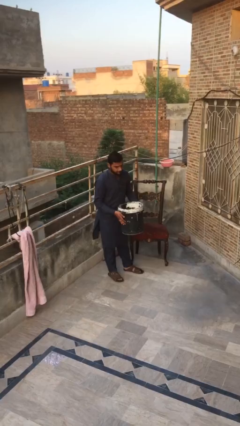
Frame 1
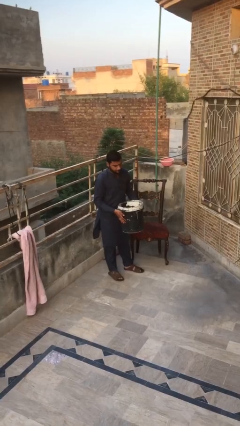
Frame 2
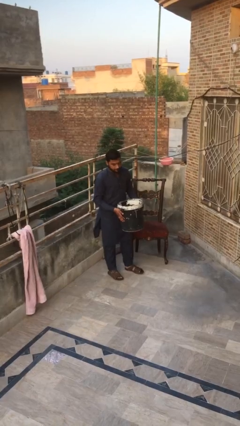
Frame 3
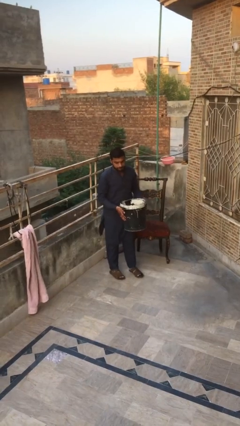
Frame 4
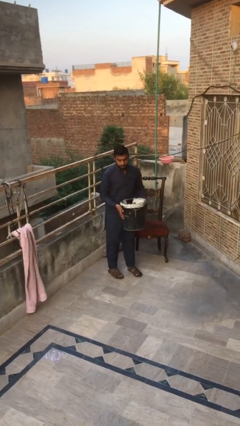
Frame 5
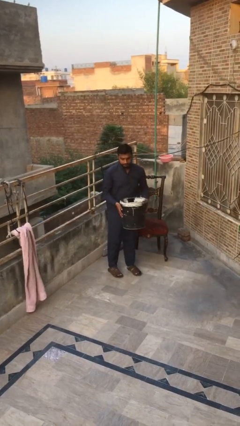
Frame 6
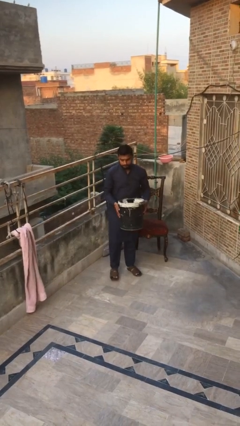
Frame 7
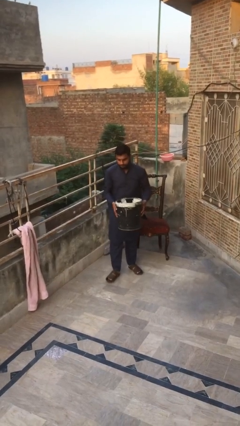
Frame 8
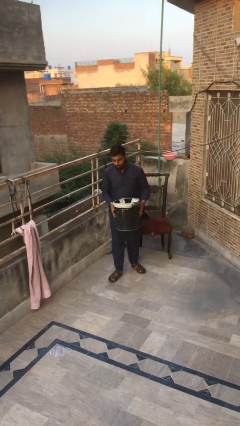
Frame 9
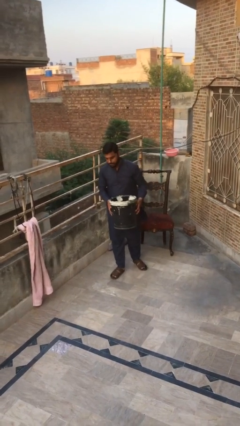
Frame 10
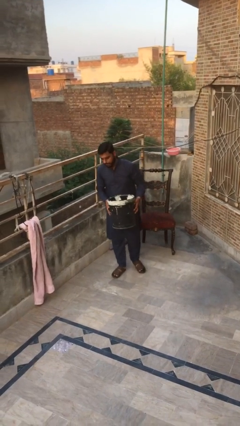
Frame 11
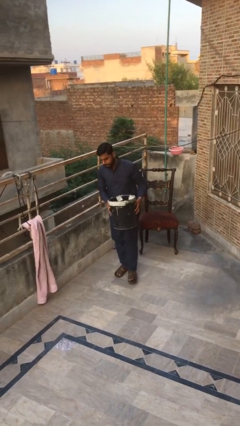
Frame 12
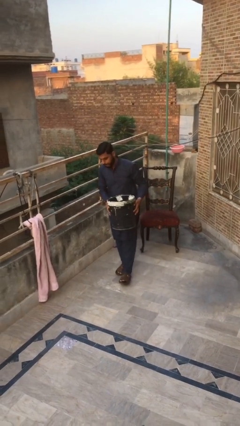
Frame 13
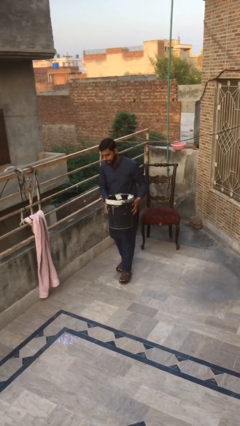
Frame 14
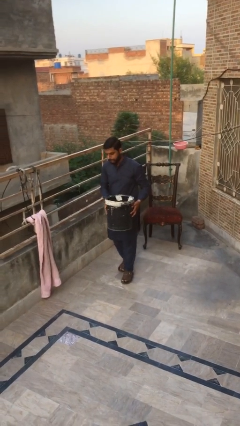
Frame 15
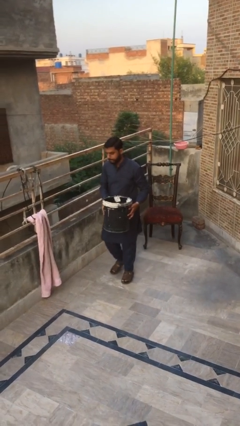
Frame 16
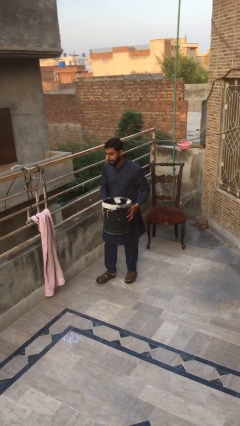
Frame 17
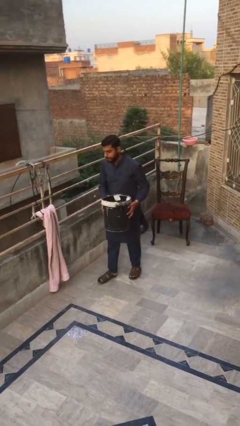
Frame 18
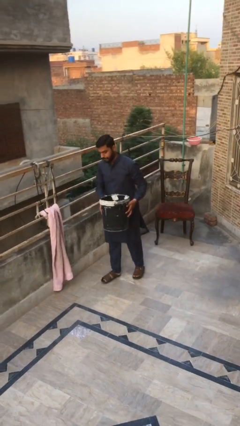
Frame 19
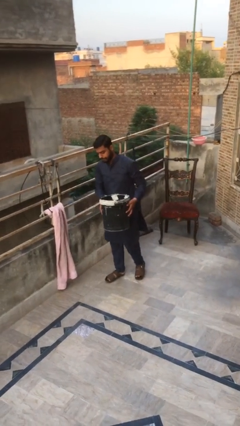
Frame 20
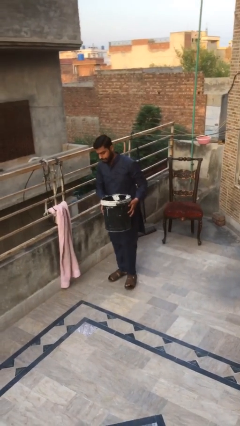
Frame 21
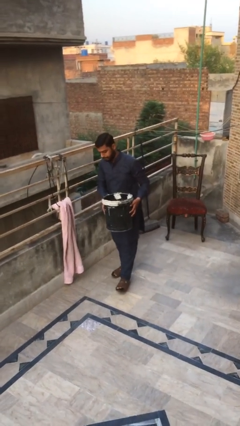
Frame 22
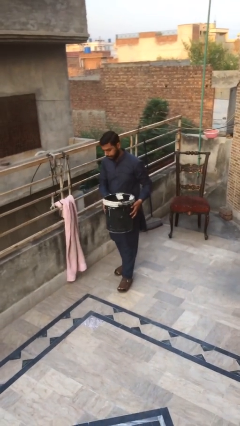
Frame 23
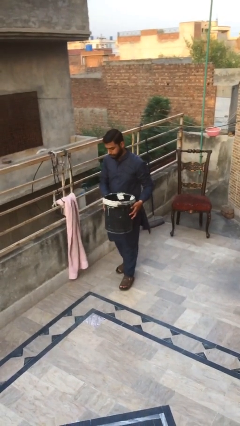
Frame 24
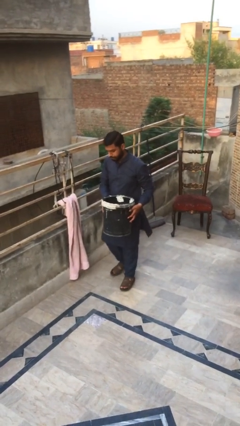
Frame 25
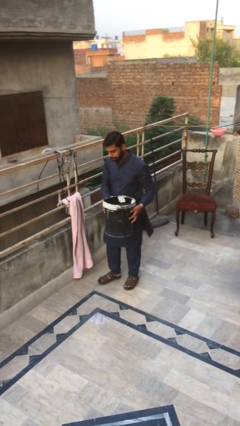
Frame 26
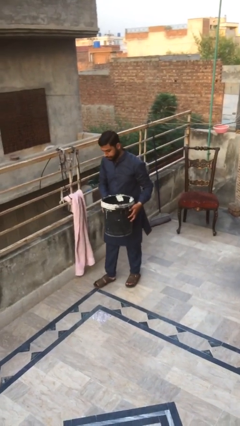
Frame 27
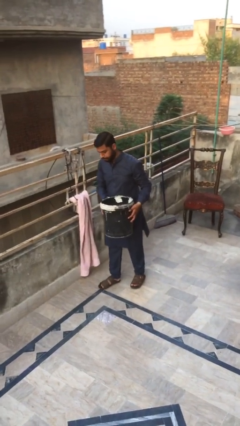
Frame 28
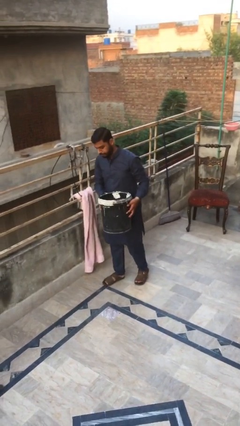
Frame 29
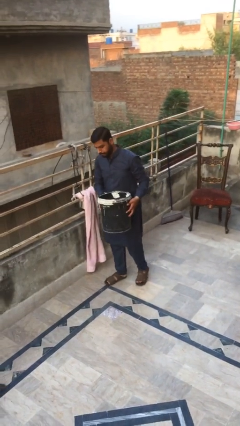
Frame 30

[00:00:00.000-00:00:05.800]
person carries heavy object

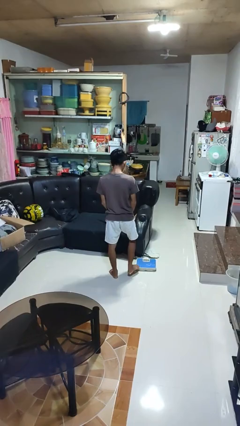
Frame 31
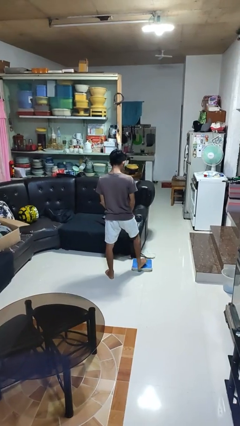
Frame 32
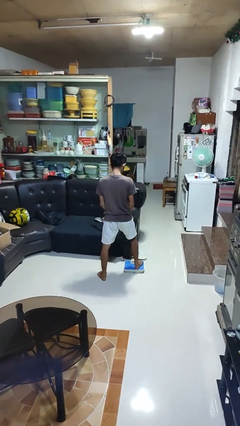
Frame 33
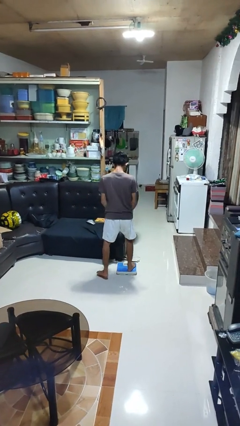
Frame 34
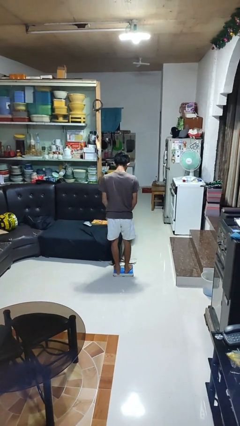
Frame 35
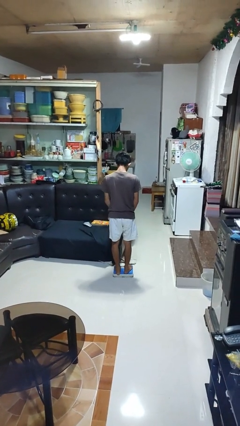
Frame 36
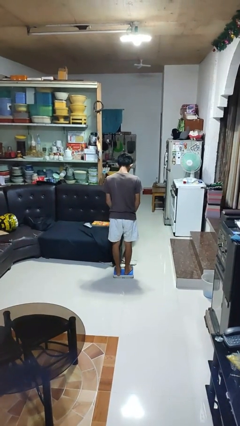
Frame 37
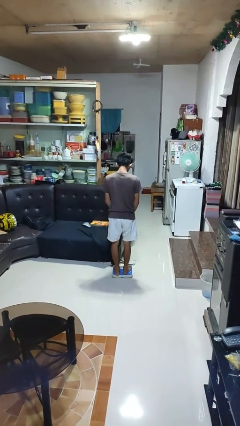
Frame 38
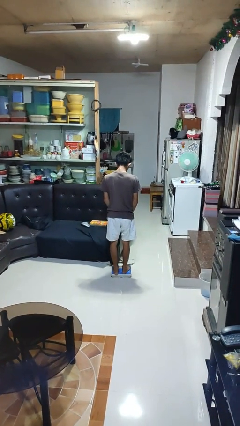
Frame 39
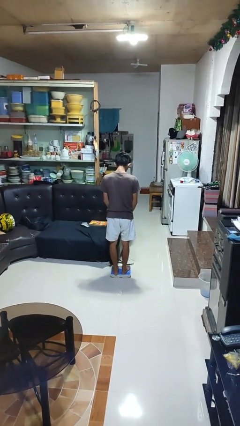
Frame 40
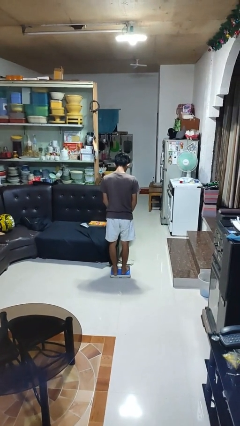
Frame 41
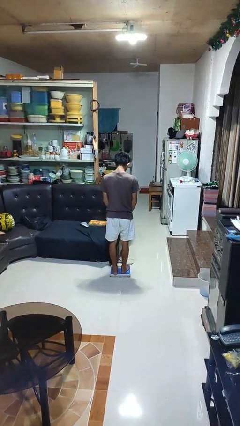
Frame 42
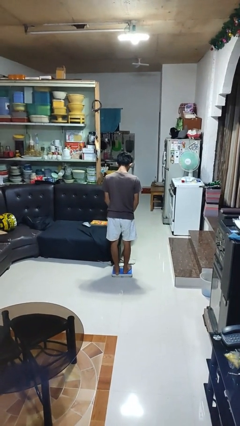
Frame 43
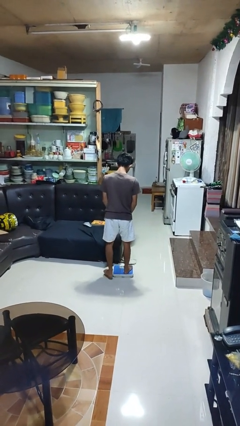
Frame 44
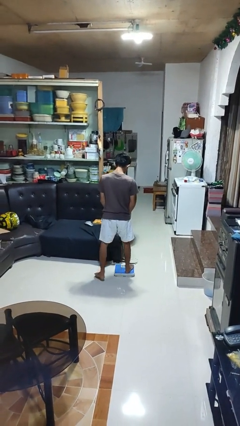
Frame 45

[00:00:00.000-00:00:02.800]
person uses bodyweight scale

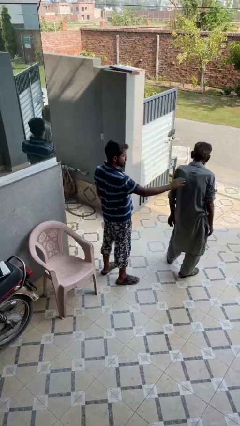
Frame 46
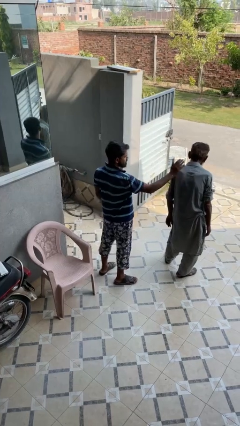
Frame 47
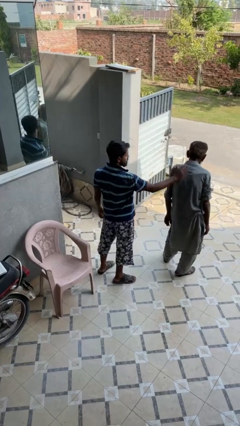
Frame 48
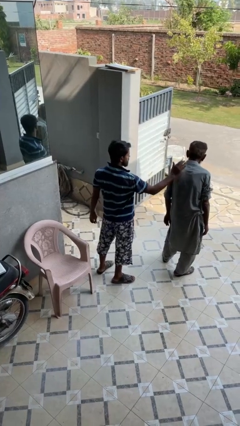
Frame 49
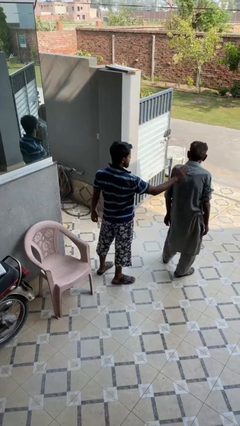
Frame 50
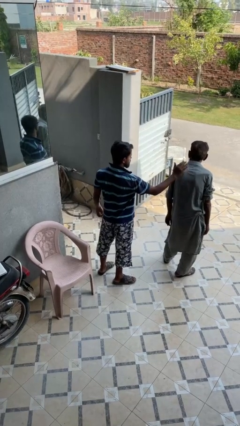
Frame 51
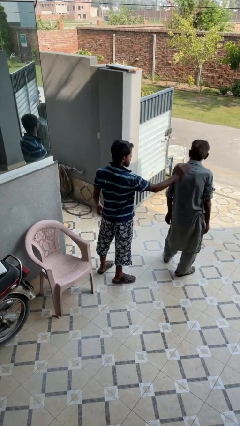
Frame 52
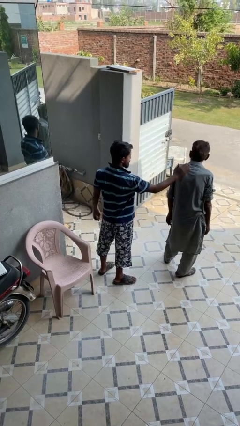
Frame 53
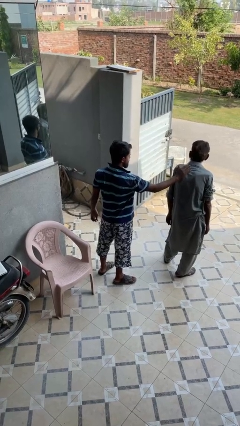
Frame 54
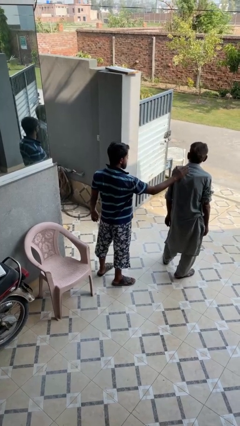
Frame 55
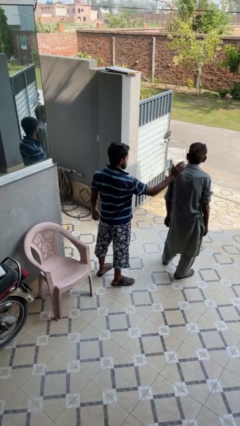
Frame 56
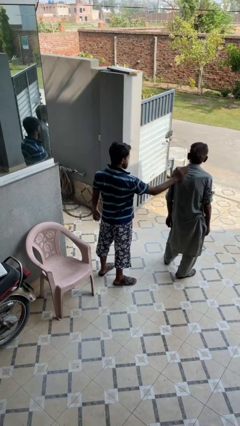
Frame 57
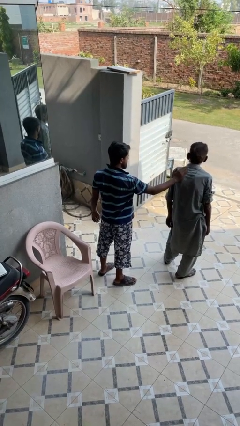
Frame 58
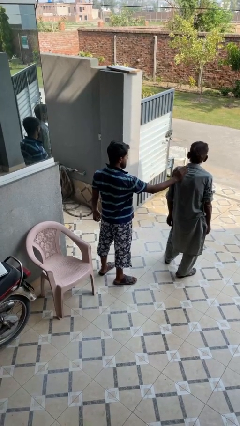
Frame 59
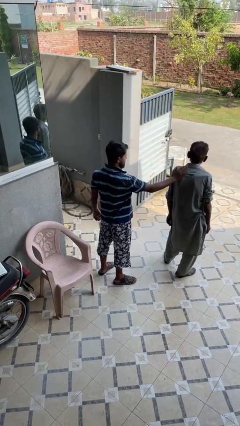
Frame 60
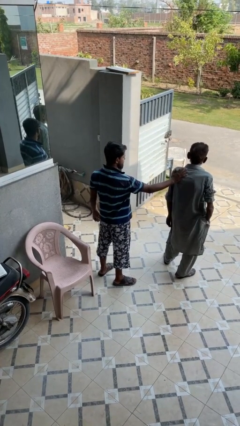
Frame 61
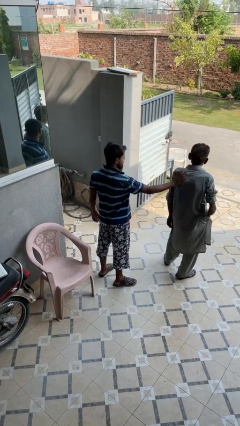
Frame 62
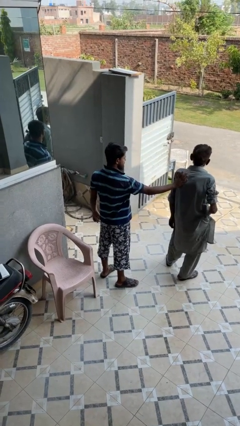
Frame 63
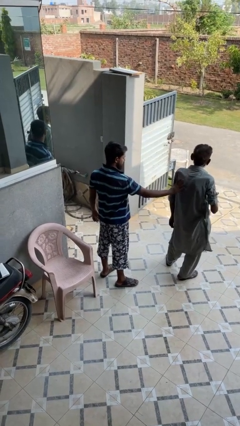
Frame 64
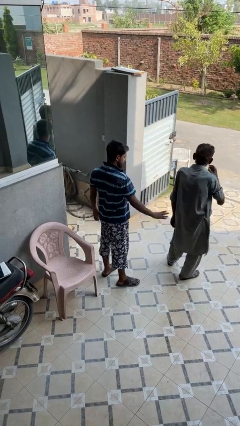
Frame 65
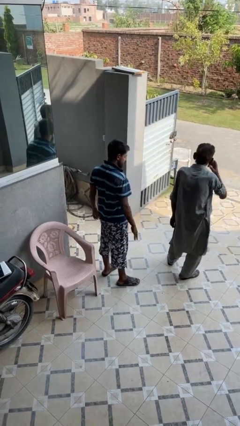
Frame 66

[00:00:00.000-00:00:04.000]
person touches back of person

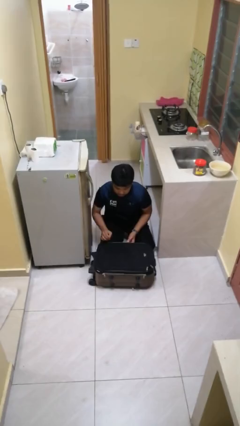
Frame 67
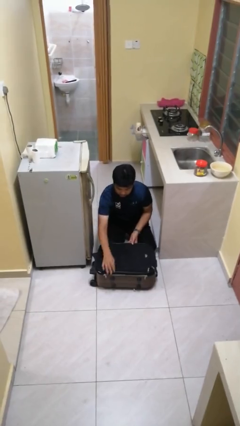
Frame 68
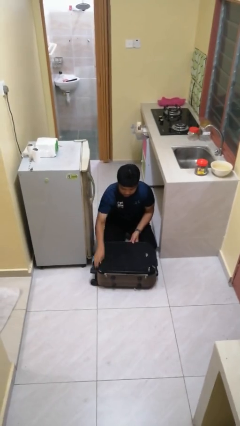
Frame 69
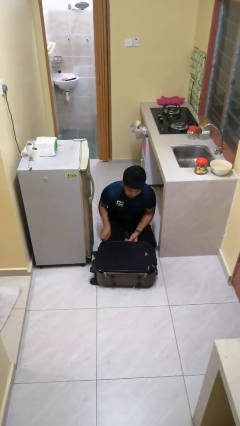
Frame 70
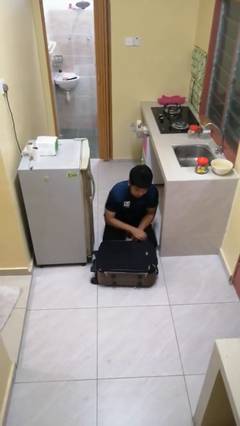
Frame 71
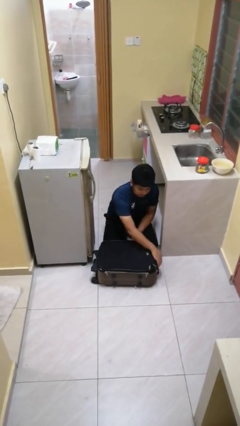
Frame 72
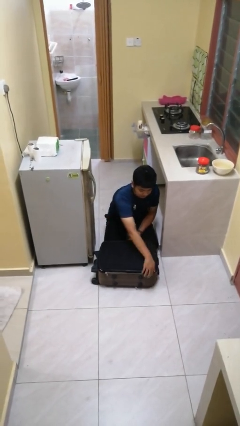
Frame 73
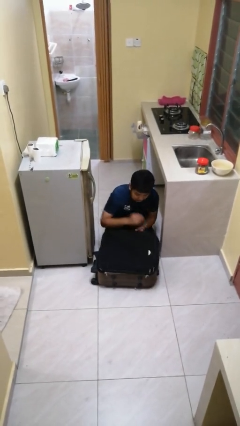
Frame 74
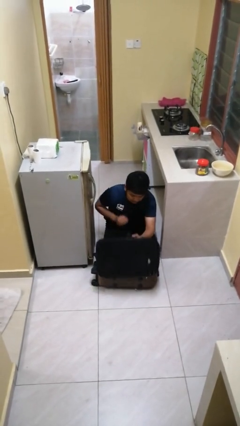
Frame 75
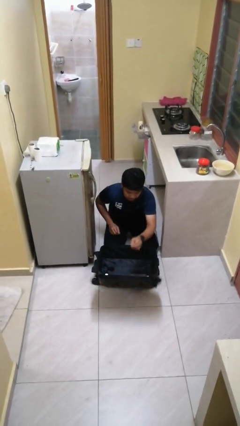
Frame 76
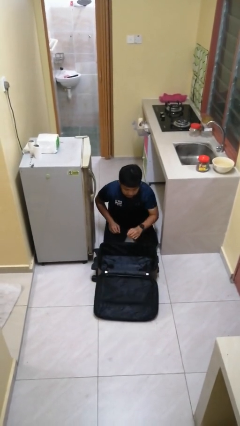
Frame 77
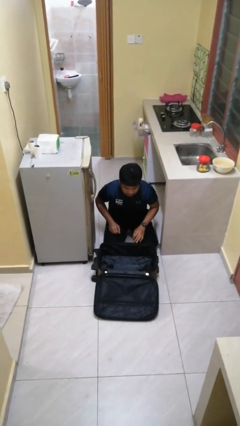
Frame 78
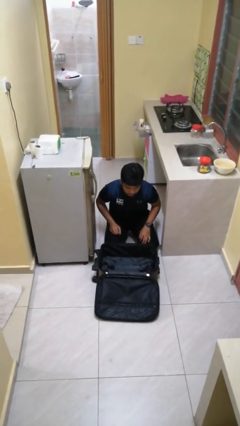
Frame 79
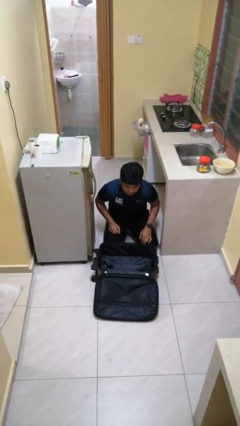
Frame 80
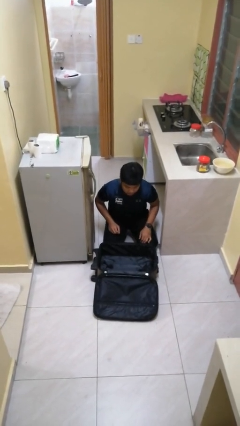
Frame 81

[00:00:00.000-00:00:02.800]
person opens suitcase

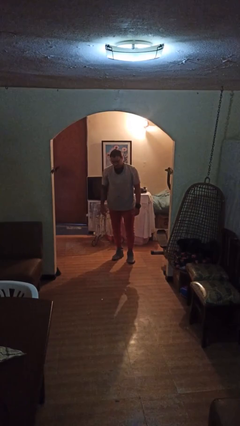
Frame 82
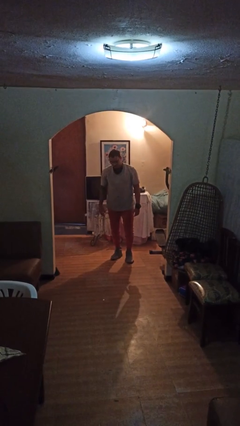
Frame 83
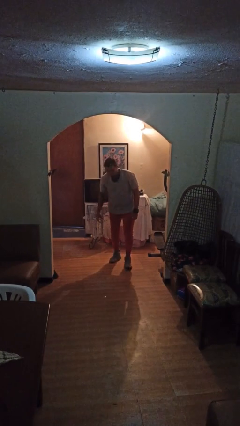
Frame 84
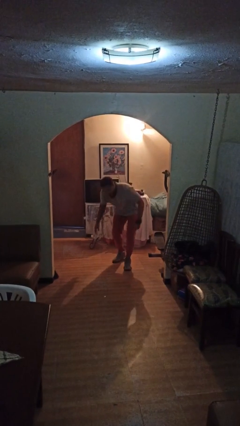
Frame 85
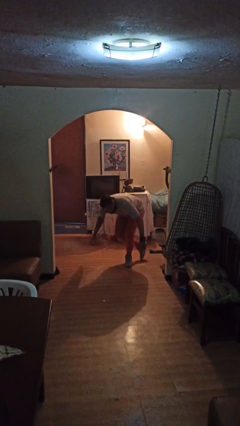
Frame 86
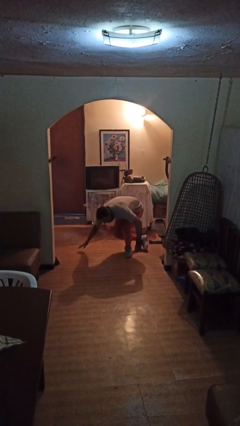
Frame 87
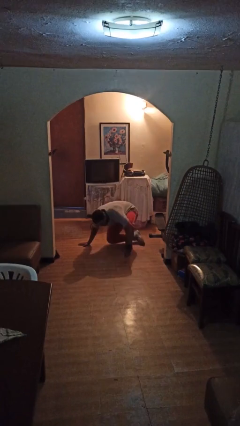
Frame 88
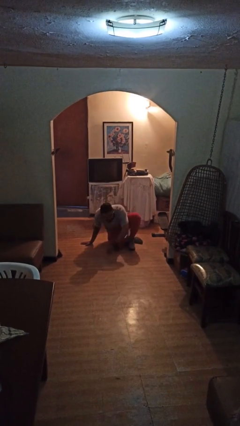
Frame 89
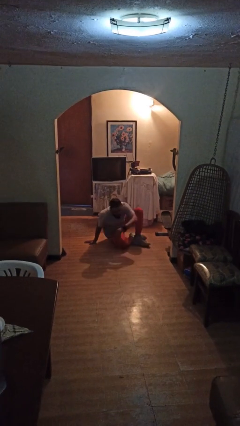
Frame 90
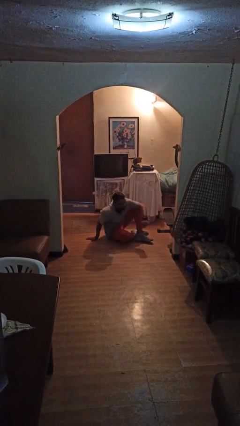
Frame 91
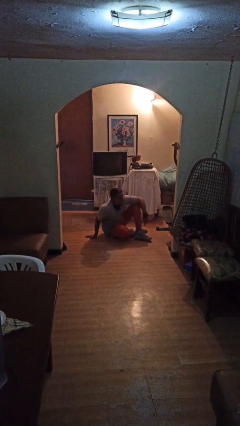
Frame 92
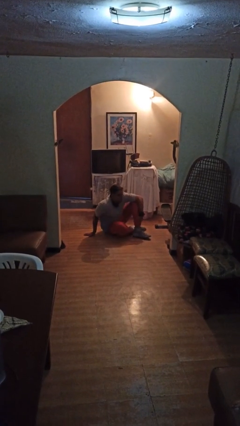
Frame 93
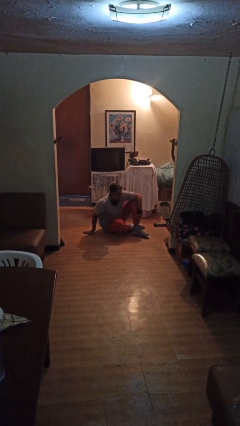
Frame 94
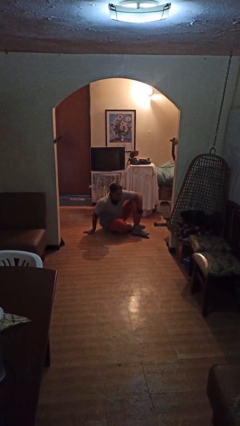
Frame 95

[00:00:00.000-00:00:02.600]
person sits down
